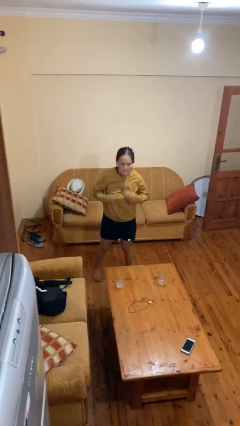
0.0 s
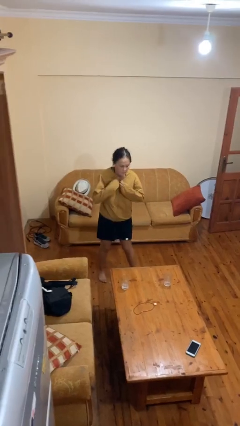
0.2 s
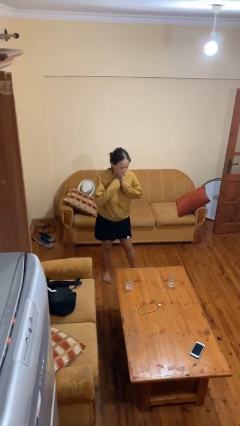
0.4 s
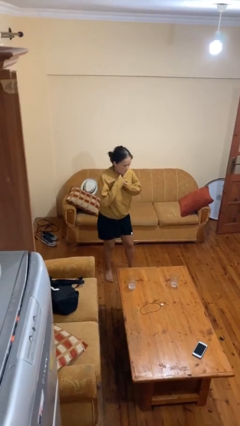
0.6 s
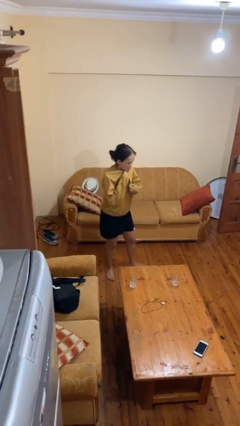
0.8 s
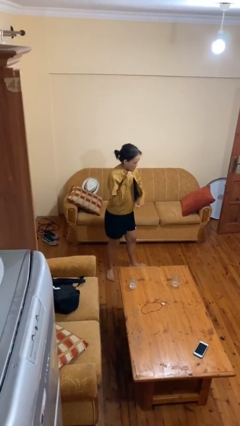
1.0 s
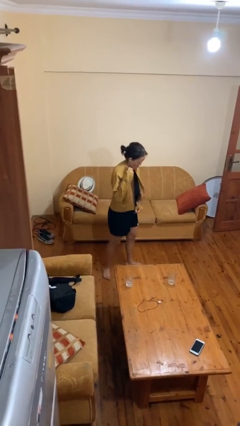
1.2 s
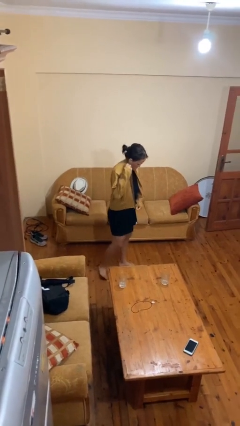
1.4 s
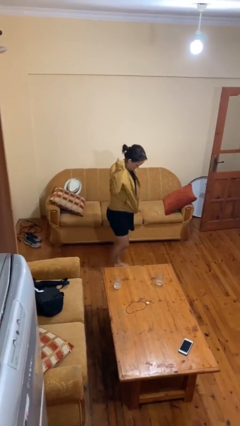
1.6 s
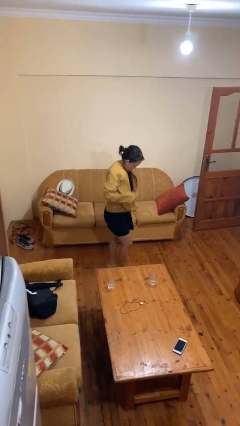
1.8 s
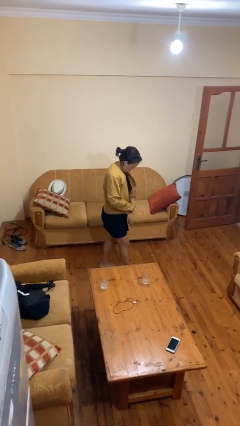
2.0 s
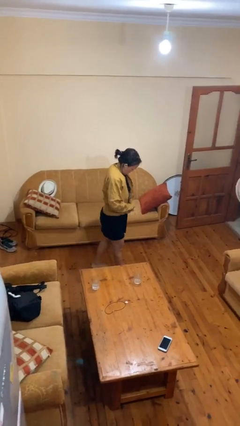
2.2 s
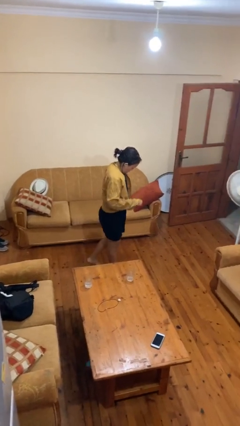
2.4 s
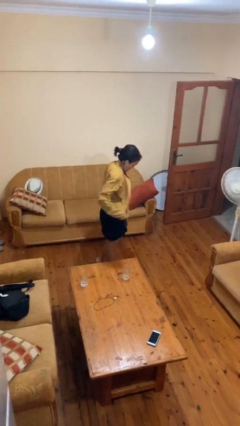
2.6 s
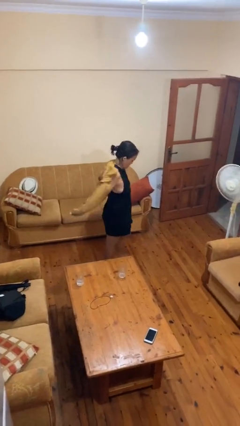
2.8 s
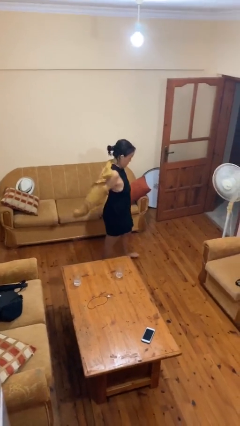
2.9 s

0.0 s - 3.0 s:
person unzips jacket

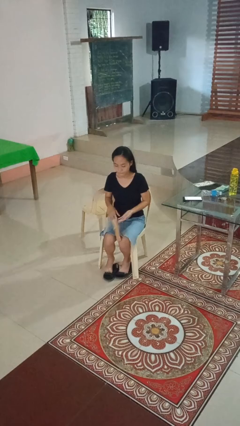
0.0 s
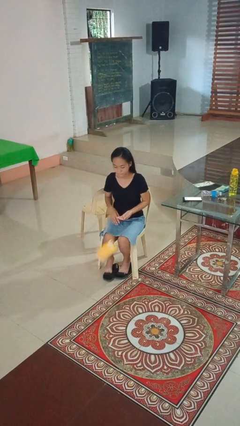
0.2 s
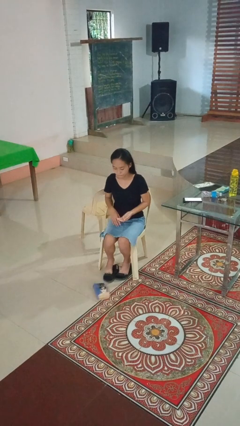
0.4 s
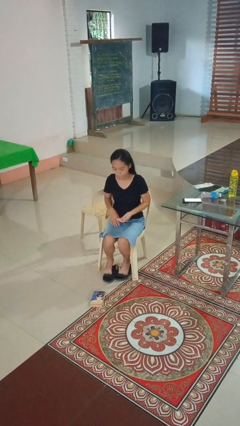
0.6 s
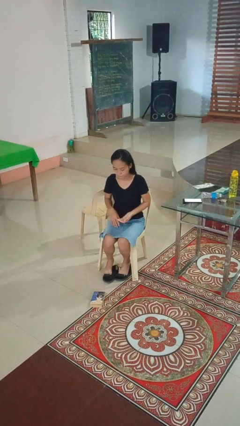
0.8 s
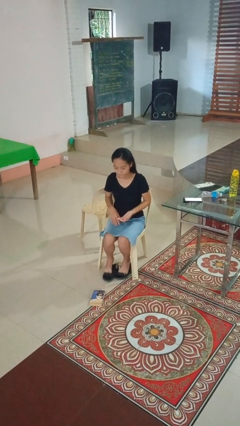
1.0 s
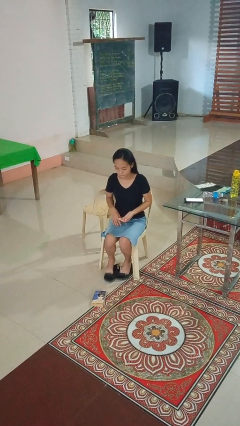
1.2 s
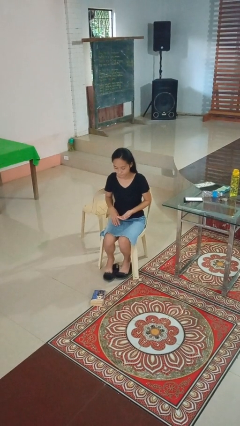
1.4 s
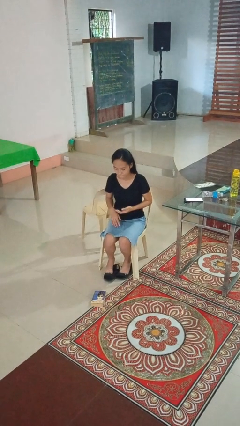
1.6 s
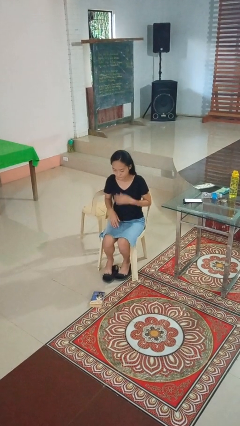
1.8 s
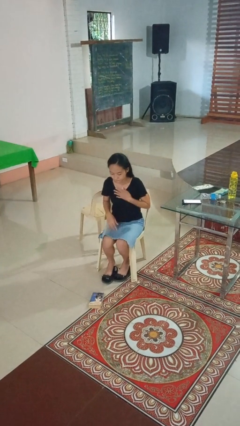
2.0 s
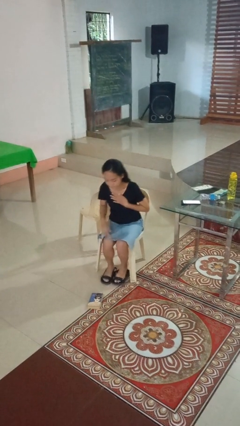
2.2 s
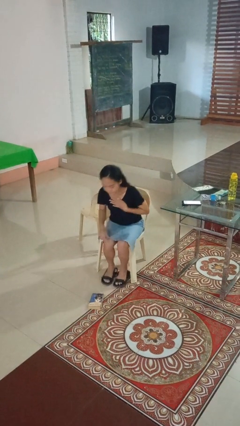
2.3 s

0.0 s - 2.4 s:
person drops object

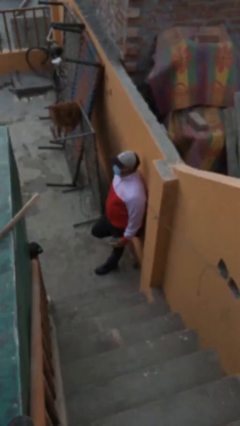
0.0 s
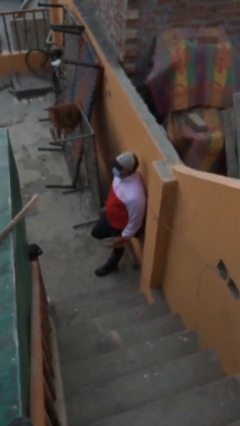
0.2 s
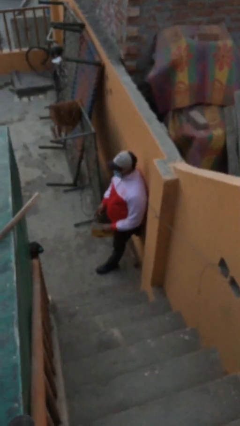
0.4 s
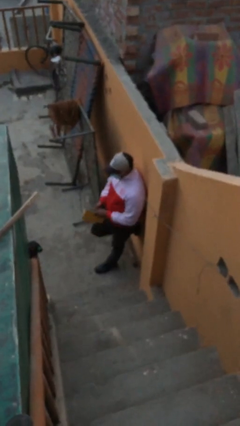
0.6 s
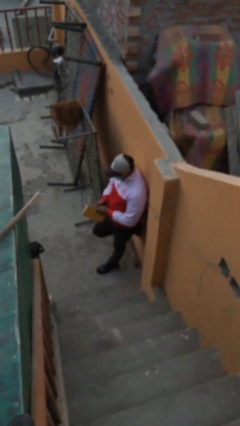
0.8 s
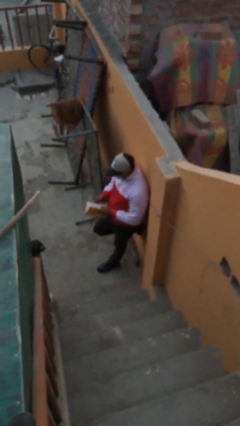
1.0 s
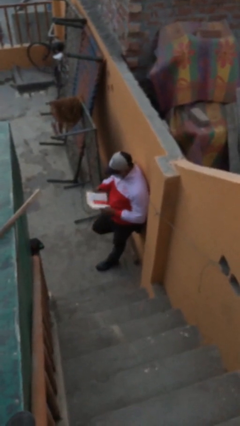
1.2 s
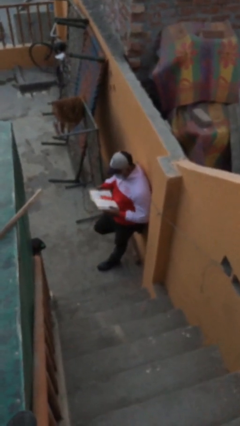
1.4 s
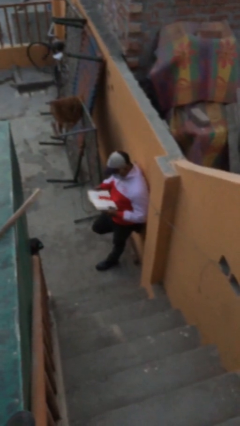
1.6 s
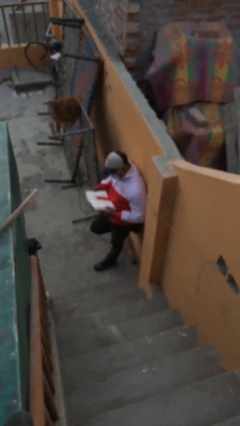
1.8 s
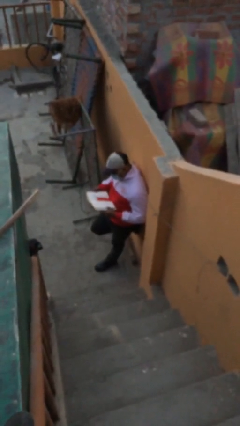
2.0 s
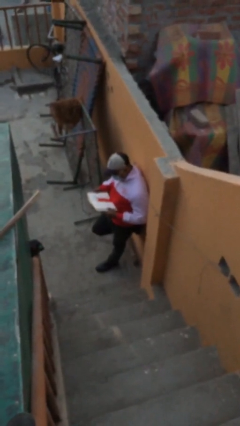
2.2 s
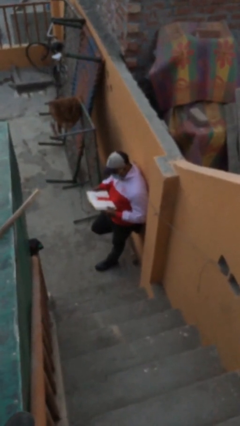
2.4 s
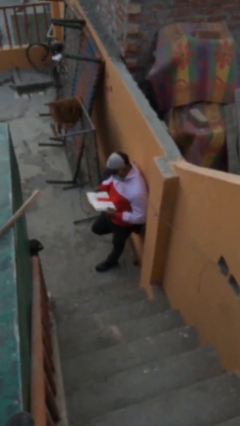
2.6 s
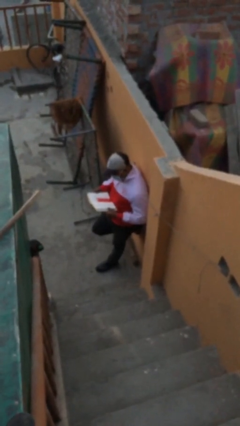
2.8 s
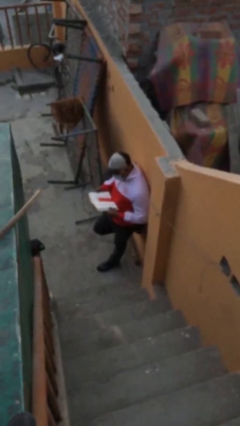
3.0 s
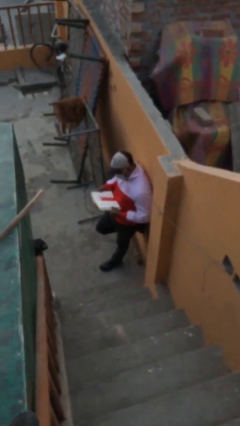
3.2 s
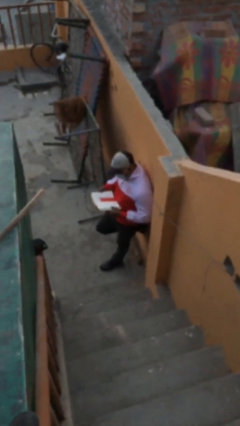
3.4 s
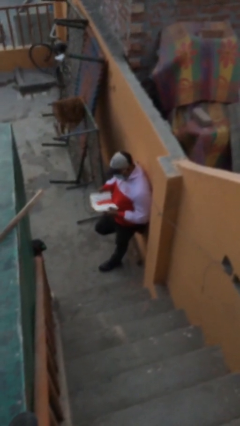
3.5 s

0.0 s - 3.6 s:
person reads document

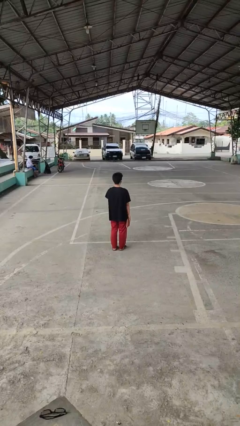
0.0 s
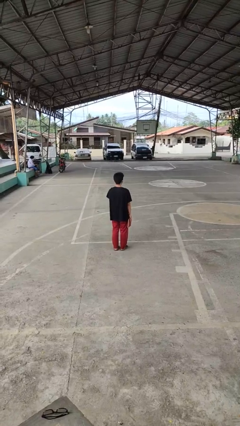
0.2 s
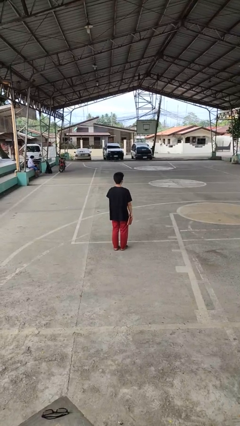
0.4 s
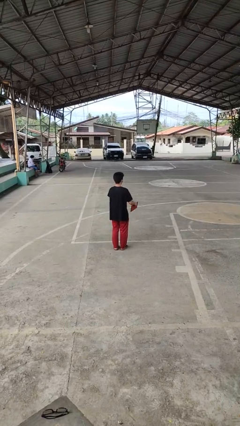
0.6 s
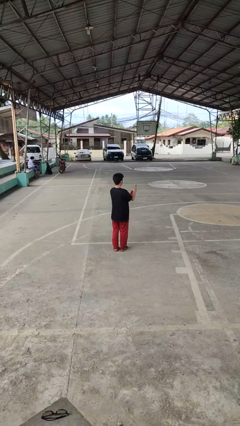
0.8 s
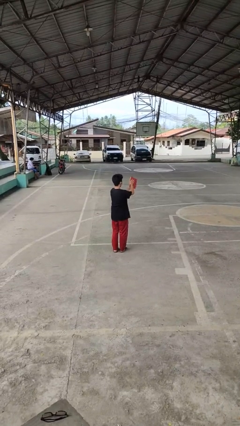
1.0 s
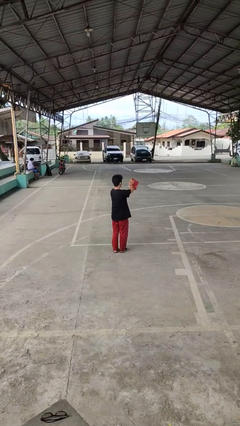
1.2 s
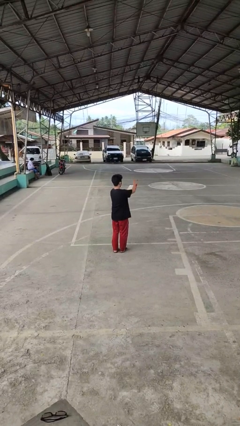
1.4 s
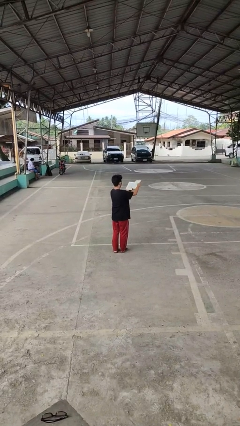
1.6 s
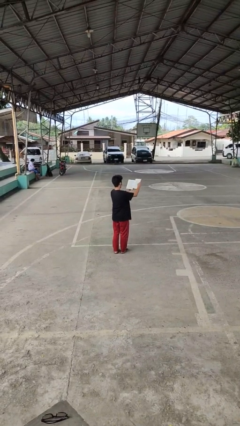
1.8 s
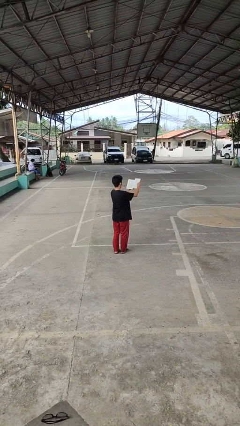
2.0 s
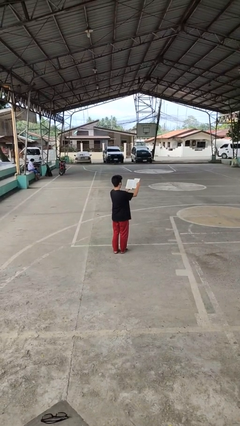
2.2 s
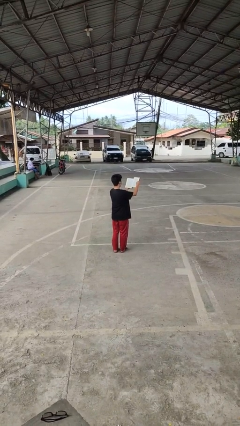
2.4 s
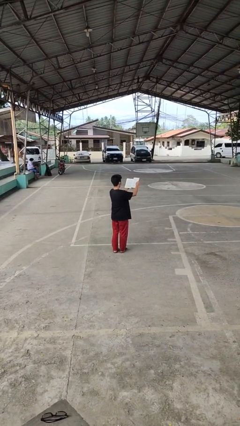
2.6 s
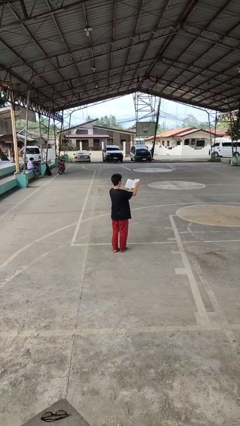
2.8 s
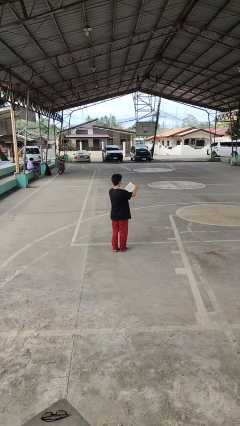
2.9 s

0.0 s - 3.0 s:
person reads book

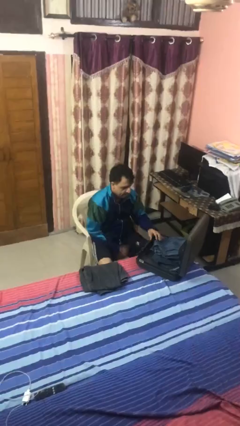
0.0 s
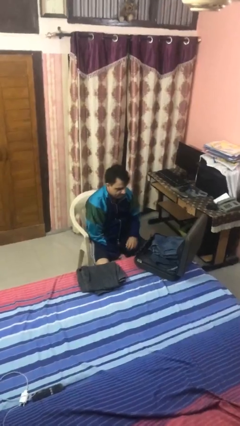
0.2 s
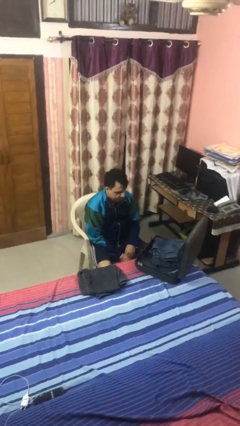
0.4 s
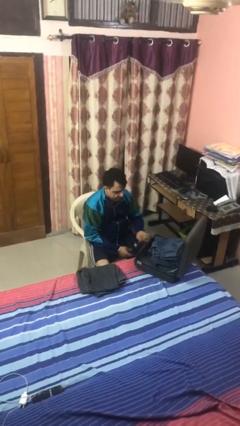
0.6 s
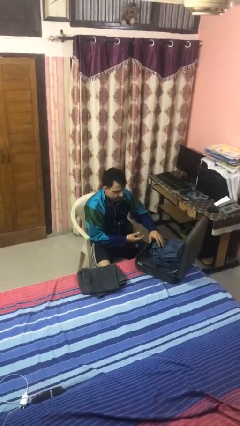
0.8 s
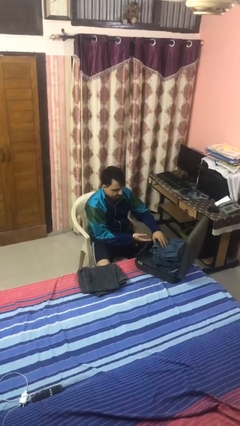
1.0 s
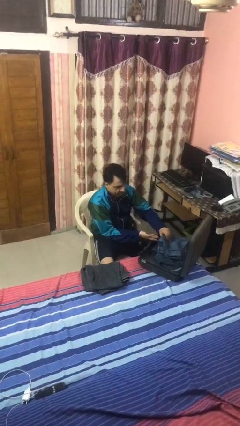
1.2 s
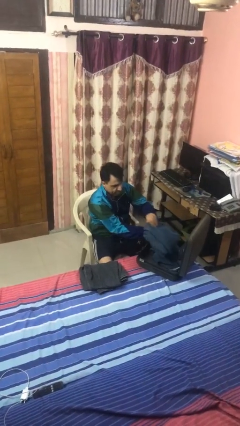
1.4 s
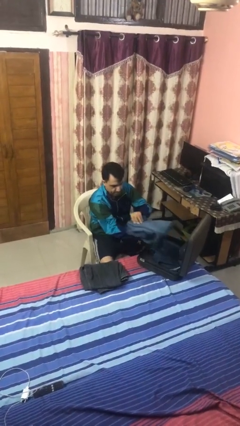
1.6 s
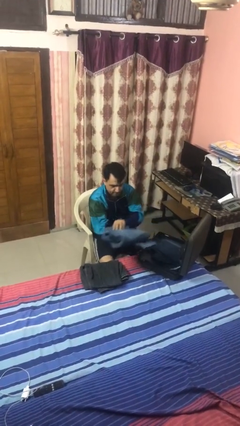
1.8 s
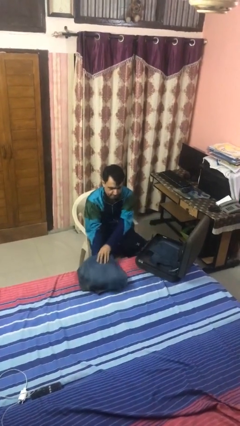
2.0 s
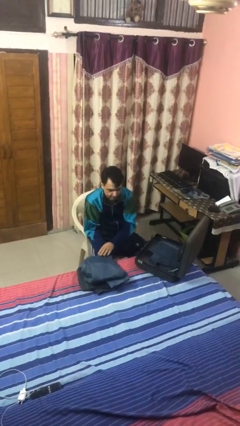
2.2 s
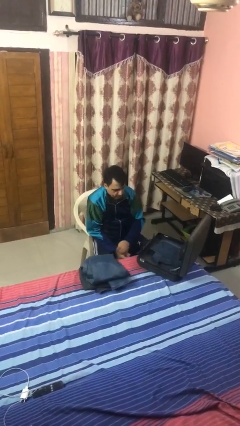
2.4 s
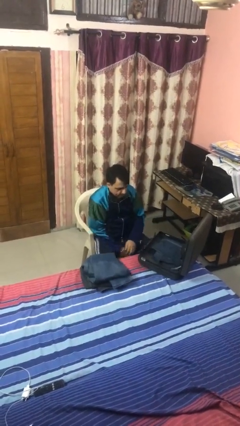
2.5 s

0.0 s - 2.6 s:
person unloads clothes from suitcase

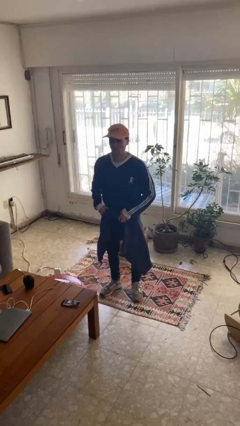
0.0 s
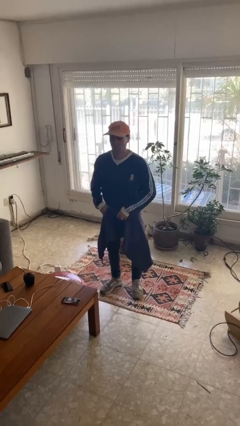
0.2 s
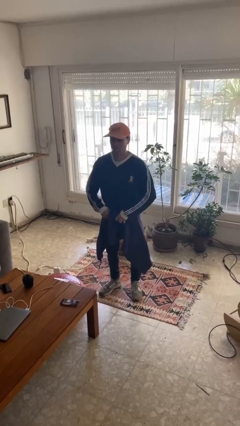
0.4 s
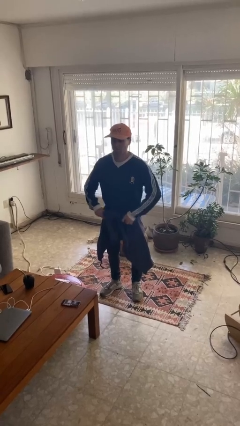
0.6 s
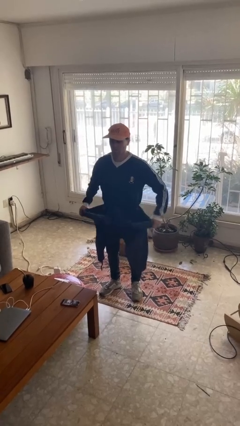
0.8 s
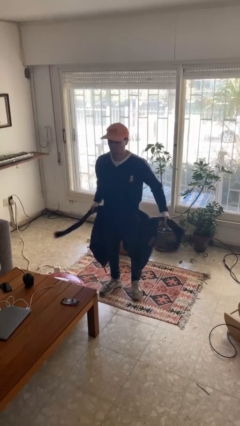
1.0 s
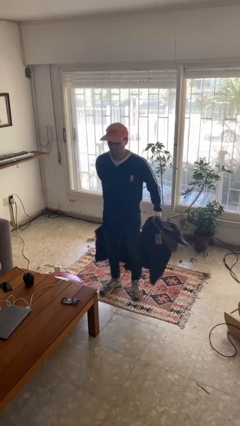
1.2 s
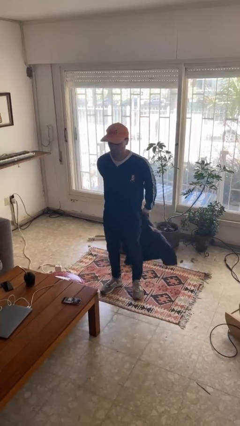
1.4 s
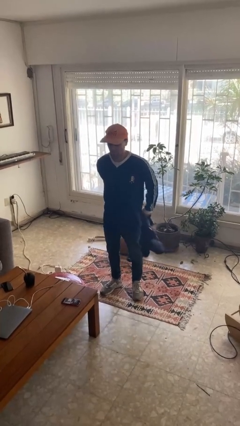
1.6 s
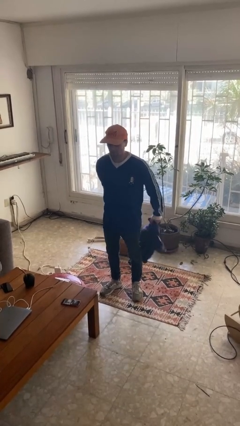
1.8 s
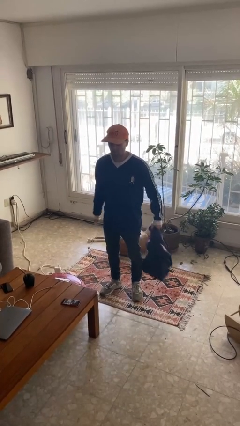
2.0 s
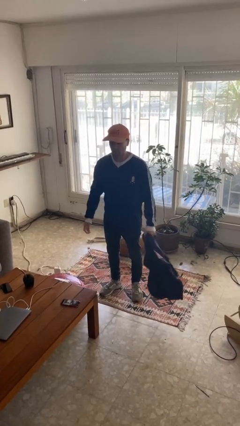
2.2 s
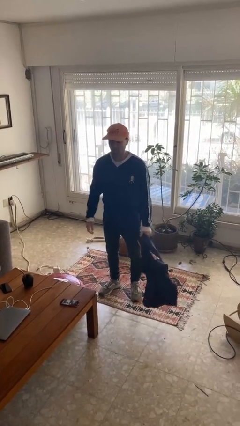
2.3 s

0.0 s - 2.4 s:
person unties jacket around waist

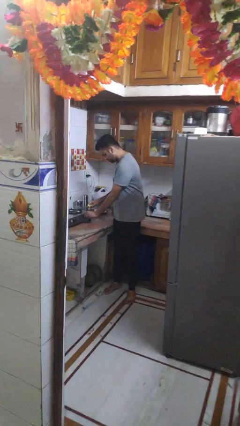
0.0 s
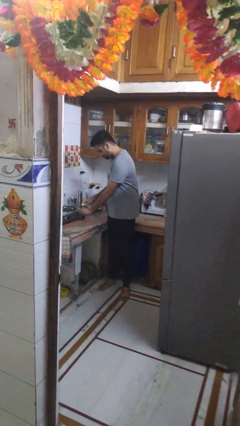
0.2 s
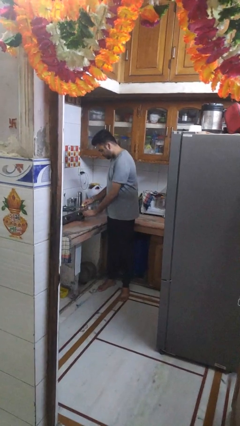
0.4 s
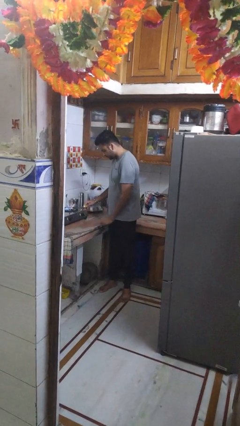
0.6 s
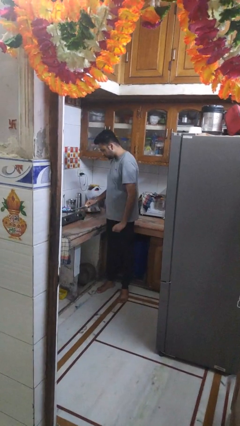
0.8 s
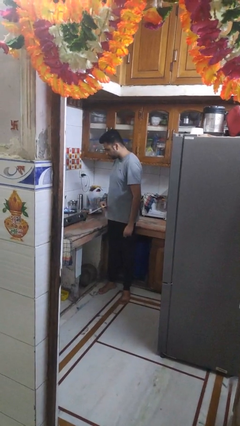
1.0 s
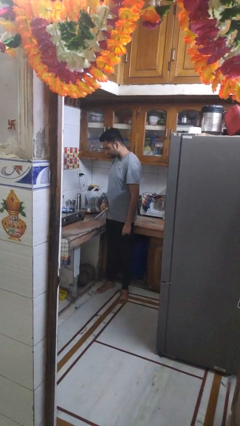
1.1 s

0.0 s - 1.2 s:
person turns on stovetop
